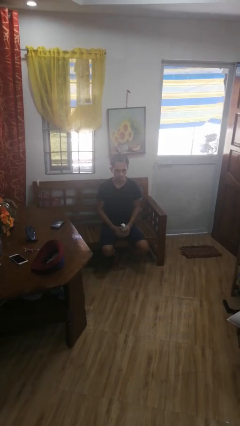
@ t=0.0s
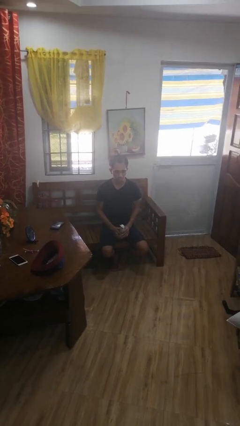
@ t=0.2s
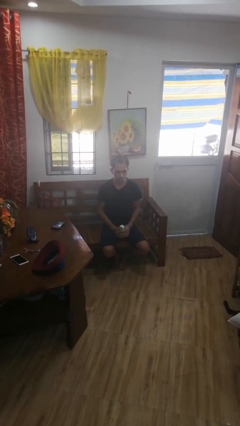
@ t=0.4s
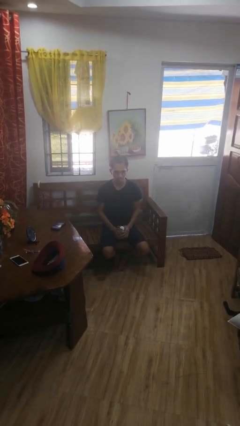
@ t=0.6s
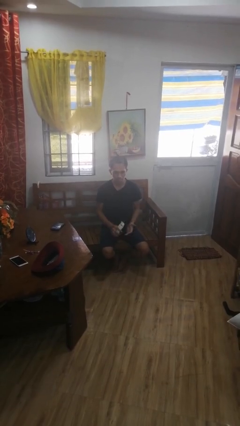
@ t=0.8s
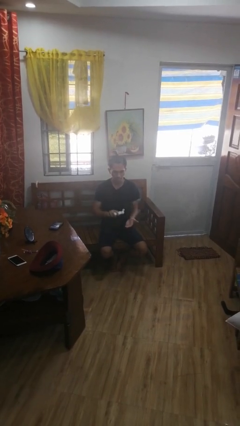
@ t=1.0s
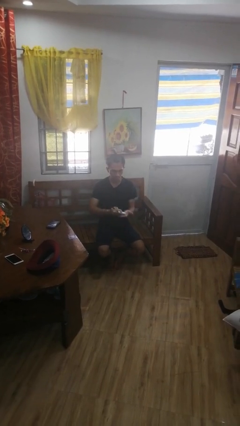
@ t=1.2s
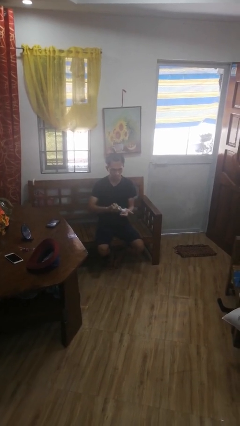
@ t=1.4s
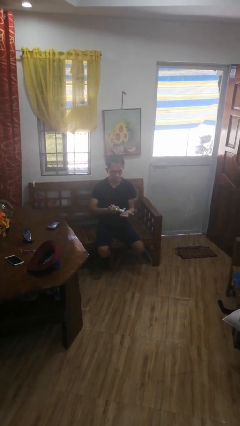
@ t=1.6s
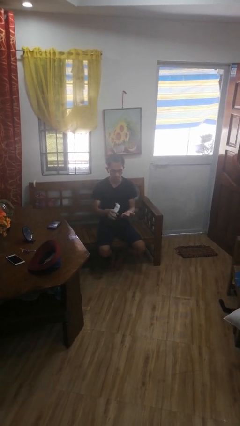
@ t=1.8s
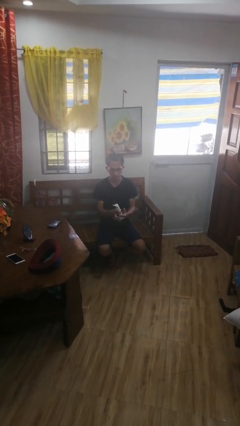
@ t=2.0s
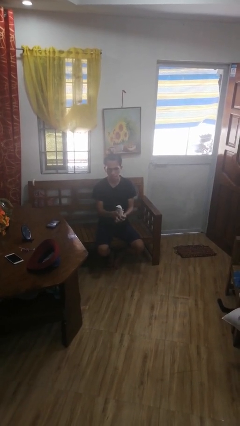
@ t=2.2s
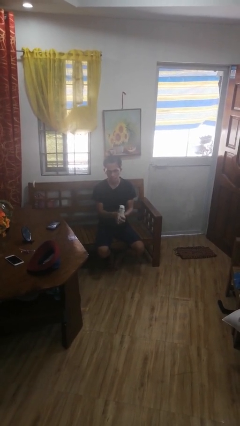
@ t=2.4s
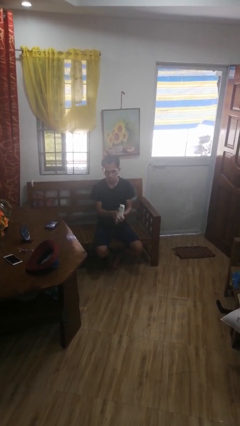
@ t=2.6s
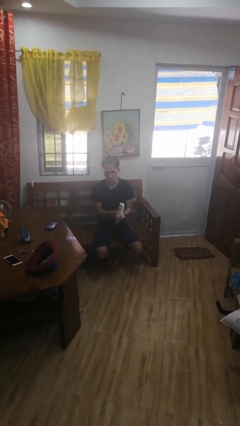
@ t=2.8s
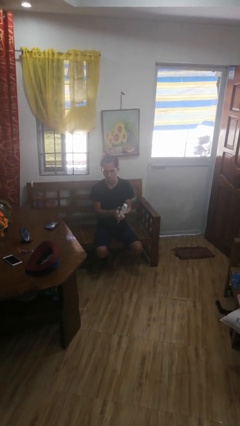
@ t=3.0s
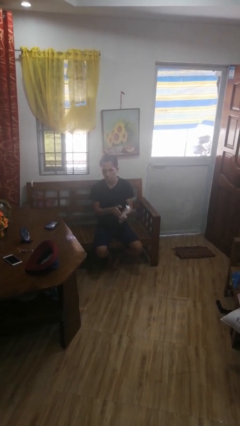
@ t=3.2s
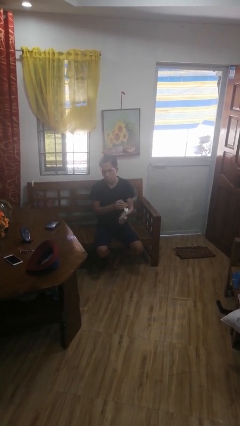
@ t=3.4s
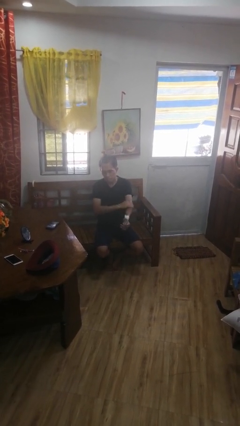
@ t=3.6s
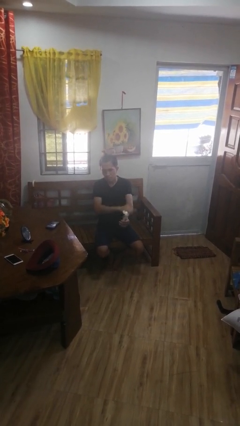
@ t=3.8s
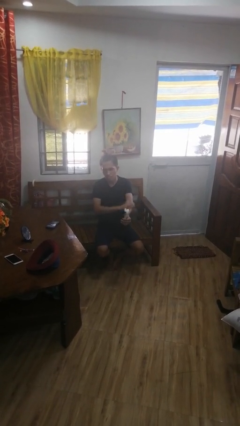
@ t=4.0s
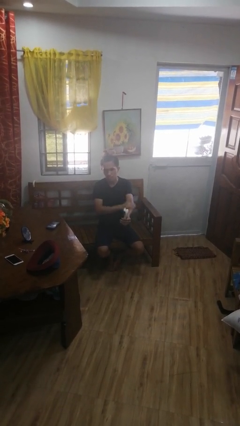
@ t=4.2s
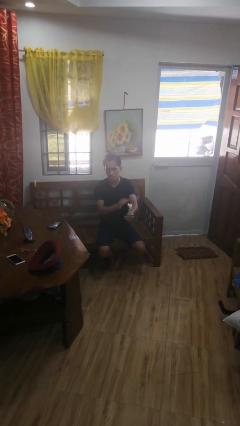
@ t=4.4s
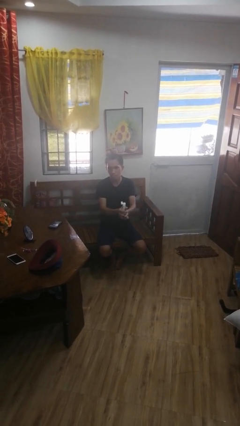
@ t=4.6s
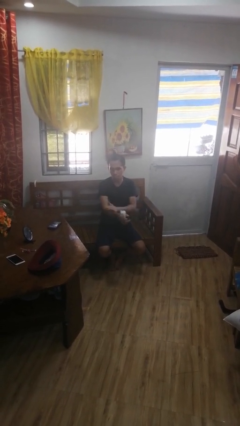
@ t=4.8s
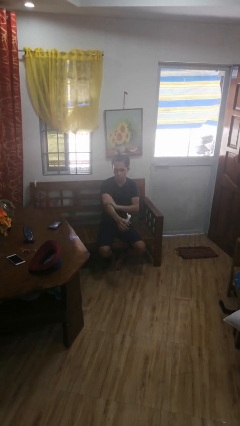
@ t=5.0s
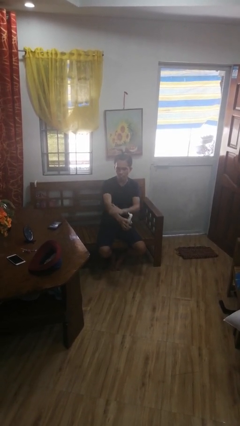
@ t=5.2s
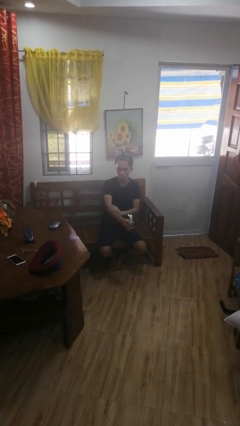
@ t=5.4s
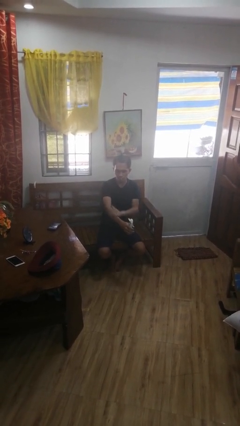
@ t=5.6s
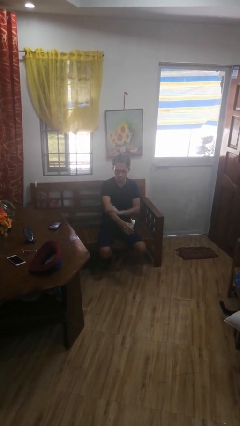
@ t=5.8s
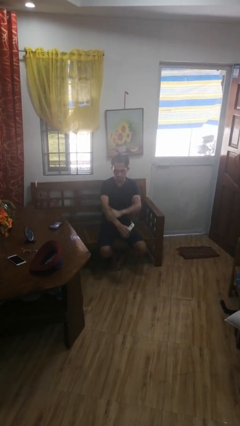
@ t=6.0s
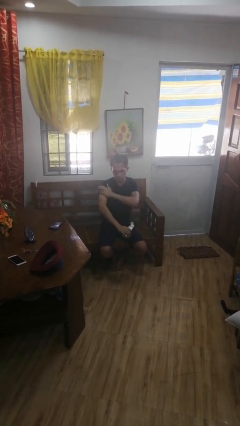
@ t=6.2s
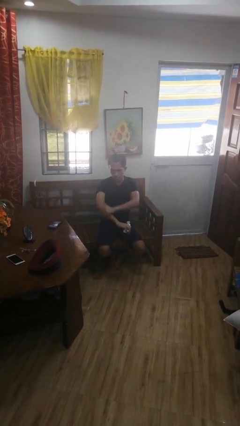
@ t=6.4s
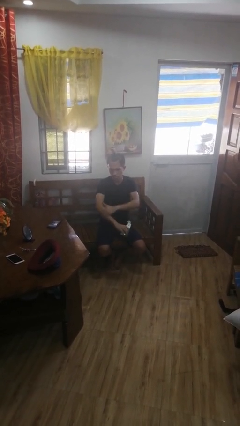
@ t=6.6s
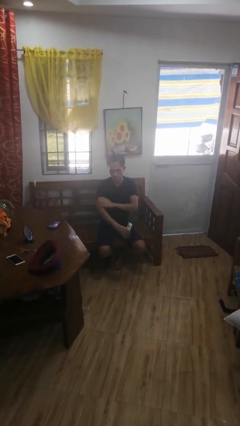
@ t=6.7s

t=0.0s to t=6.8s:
person applies sunscreen

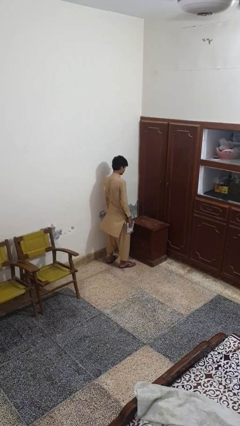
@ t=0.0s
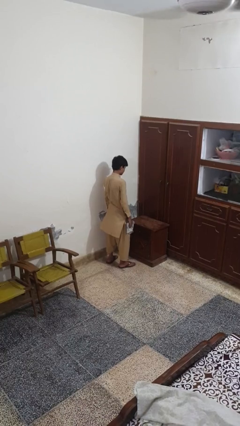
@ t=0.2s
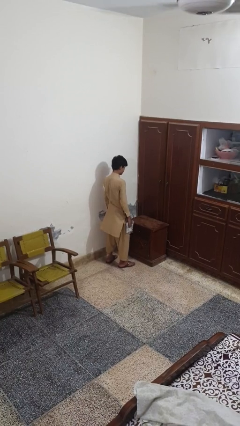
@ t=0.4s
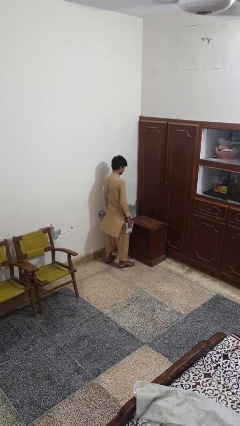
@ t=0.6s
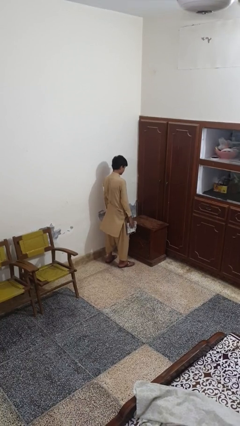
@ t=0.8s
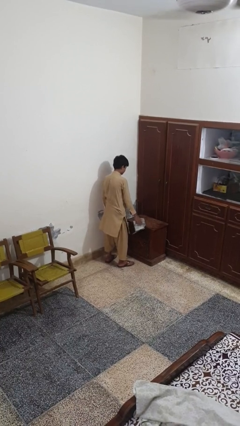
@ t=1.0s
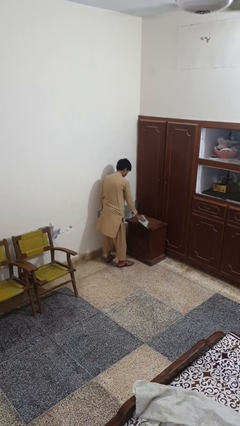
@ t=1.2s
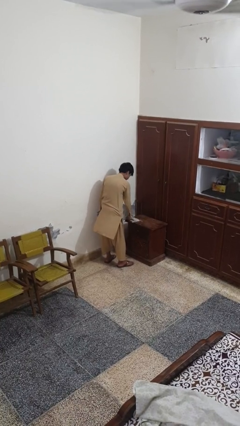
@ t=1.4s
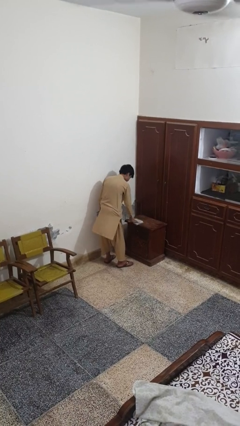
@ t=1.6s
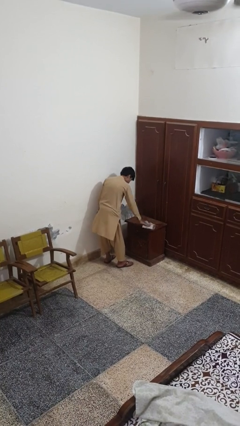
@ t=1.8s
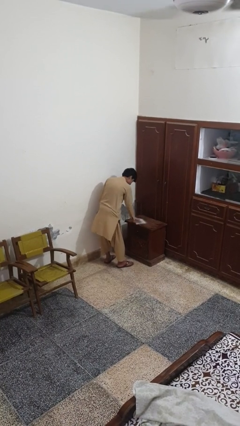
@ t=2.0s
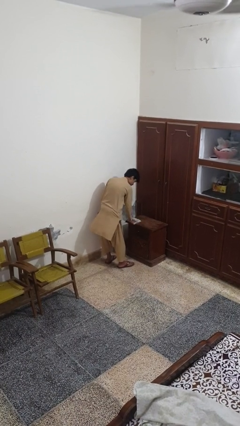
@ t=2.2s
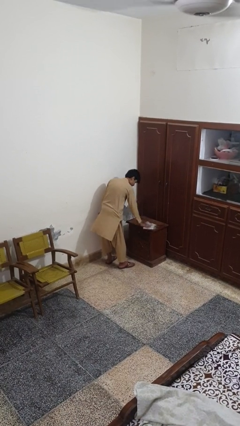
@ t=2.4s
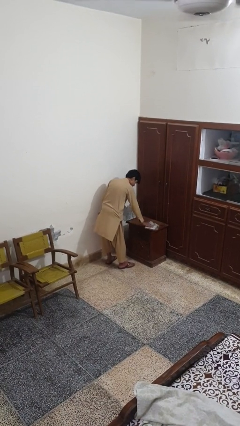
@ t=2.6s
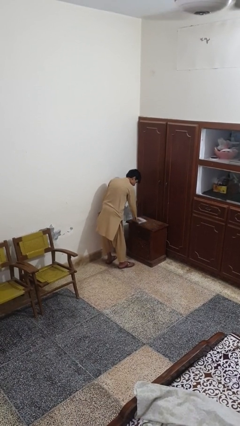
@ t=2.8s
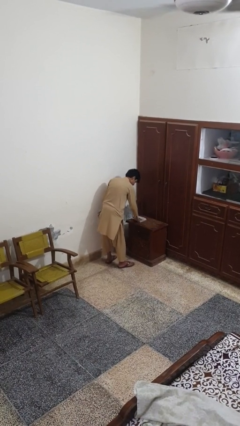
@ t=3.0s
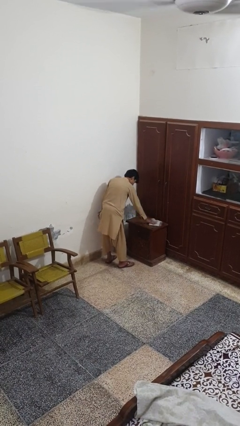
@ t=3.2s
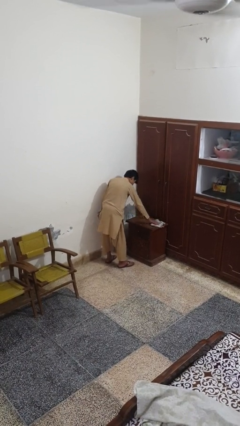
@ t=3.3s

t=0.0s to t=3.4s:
person cleans table with rag

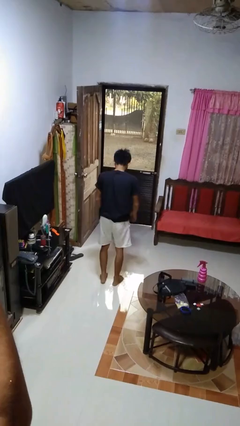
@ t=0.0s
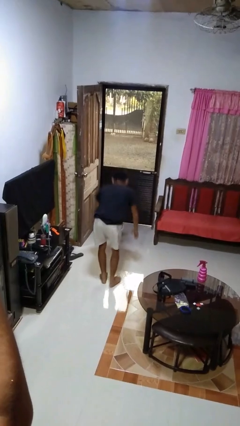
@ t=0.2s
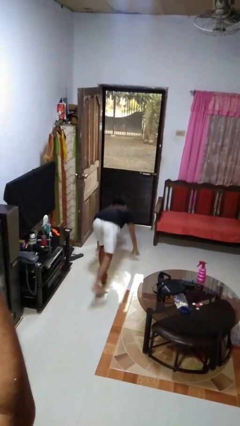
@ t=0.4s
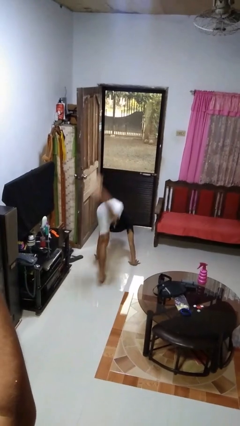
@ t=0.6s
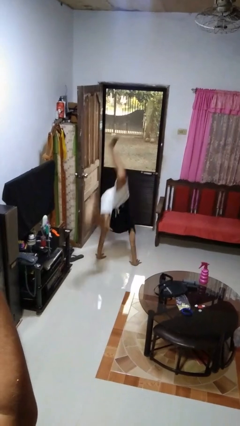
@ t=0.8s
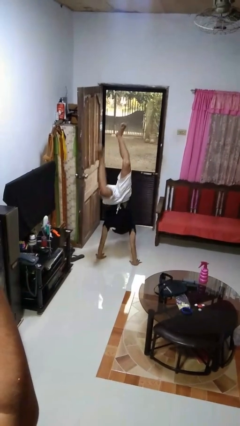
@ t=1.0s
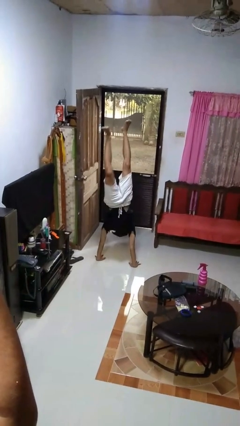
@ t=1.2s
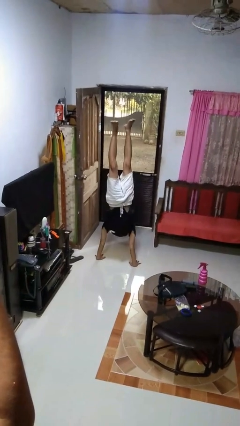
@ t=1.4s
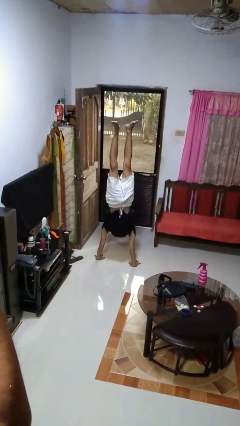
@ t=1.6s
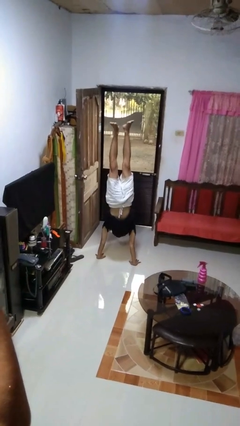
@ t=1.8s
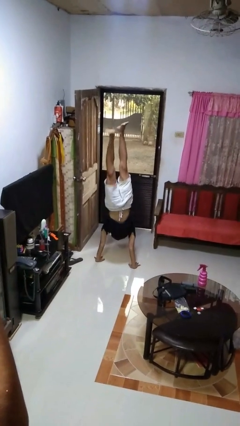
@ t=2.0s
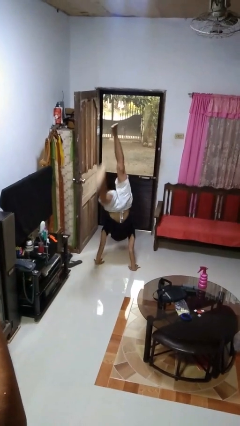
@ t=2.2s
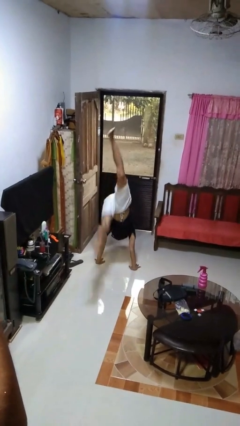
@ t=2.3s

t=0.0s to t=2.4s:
person handstand

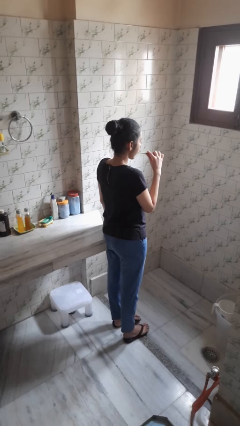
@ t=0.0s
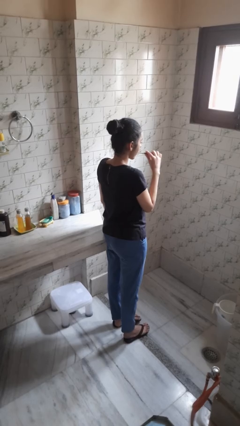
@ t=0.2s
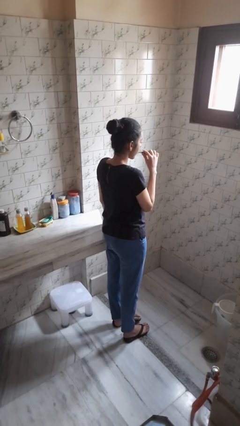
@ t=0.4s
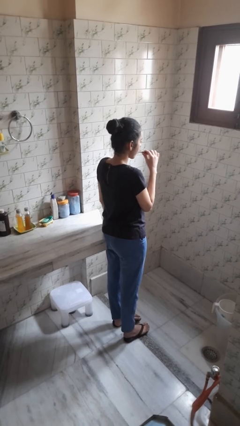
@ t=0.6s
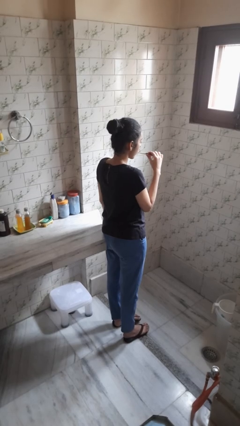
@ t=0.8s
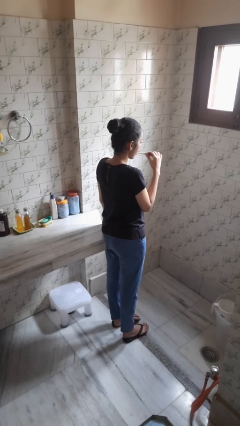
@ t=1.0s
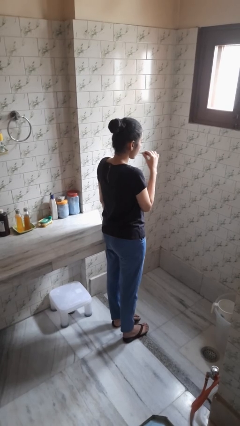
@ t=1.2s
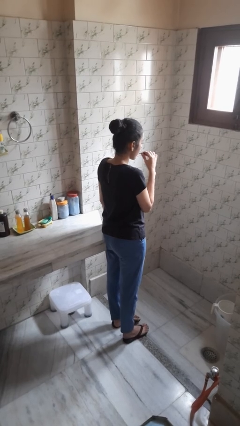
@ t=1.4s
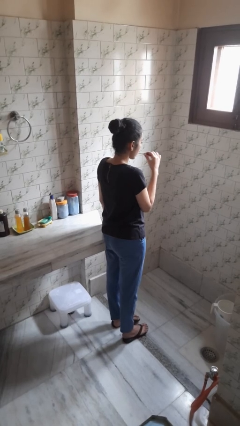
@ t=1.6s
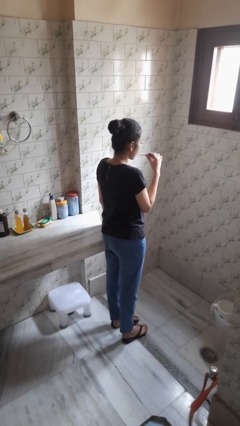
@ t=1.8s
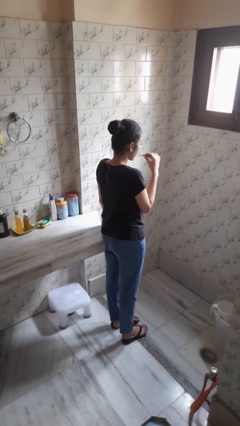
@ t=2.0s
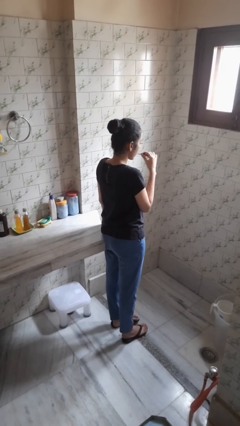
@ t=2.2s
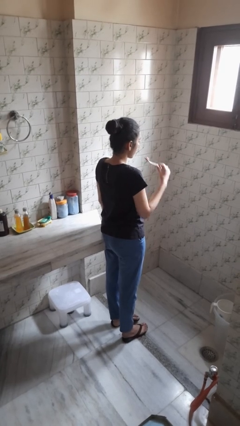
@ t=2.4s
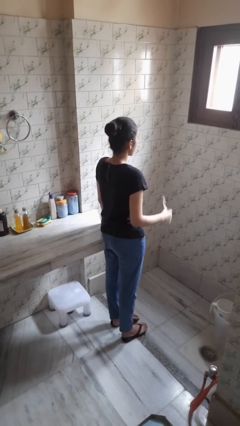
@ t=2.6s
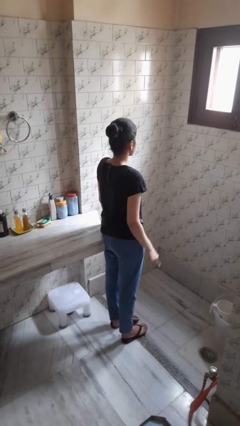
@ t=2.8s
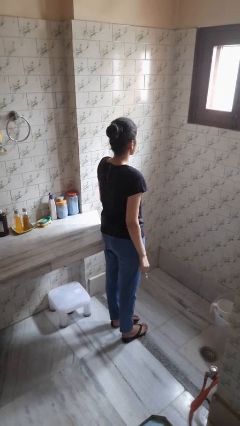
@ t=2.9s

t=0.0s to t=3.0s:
person brushes teeth

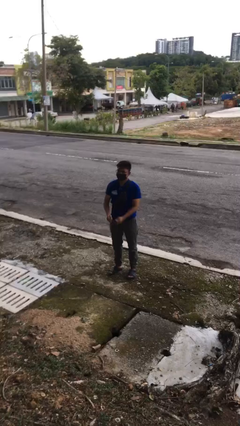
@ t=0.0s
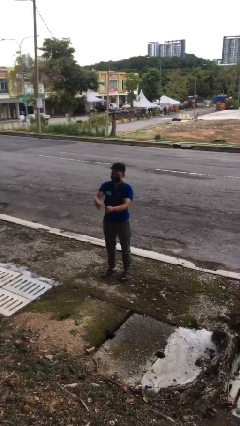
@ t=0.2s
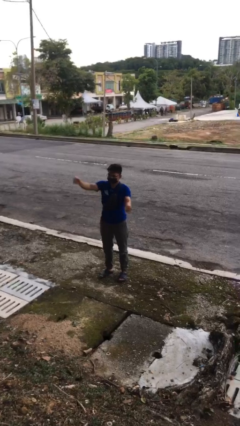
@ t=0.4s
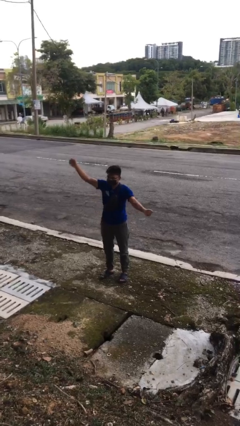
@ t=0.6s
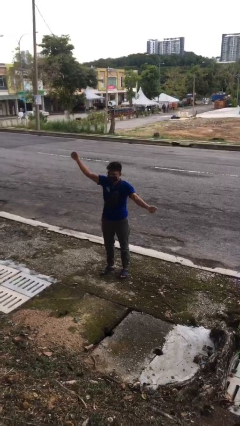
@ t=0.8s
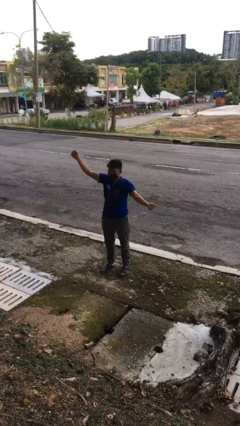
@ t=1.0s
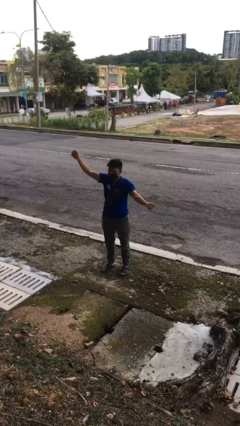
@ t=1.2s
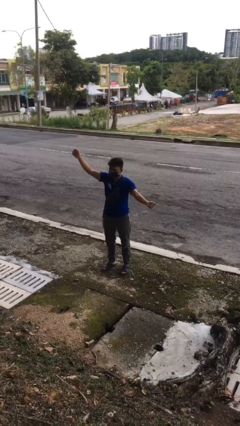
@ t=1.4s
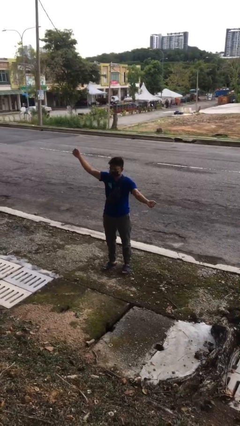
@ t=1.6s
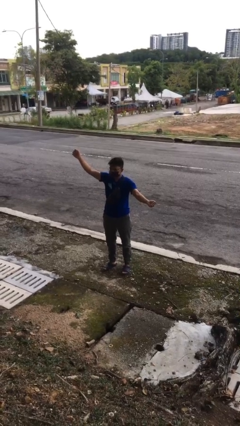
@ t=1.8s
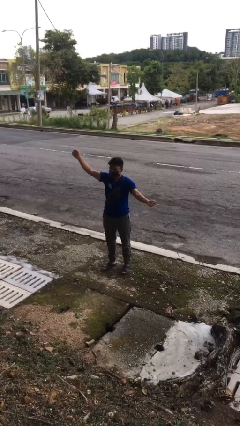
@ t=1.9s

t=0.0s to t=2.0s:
person gestures zoom in
